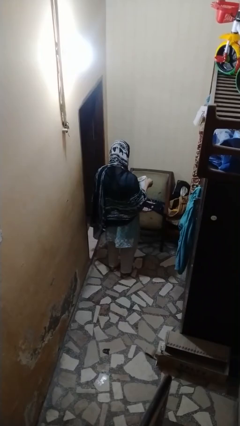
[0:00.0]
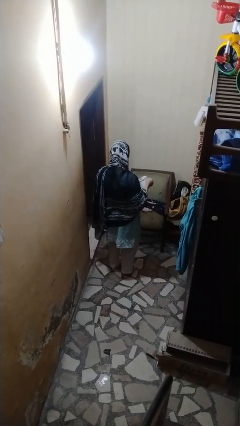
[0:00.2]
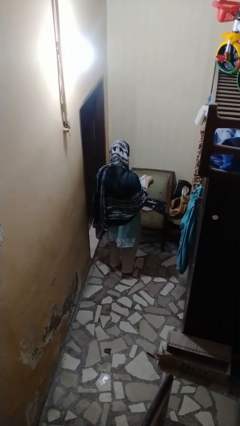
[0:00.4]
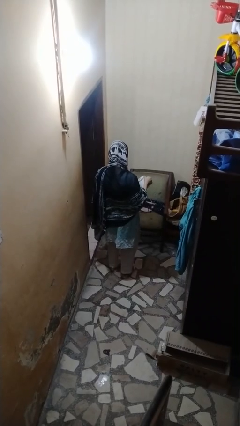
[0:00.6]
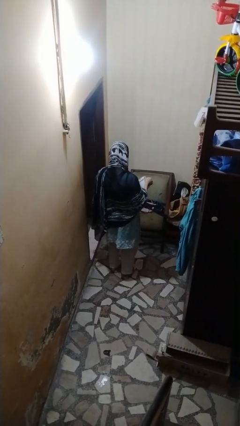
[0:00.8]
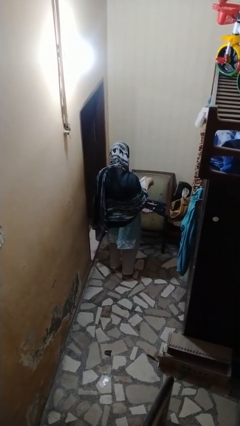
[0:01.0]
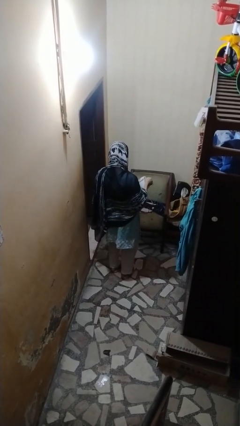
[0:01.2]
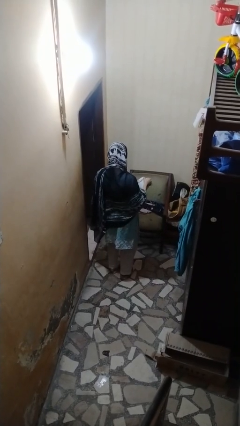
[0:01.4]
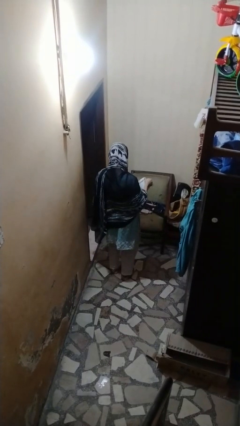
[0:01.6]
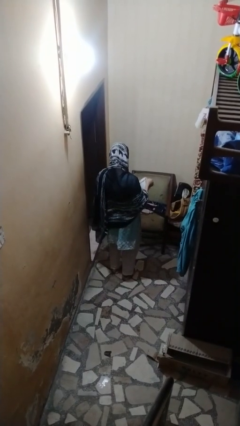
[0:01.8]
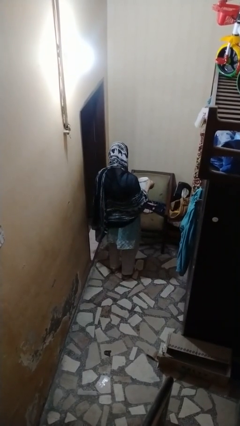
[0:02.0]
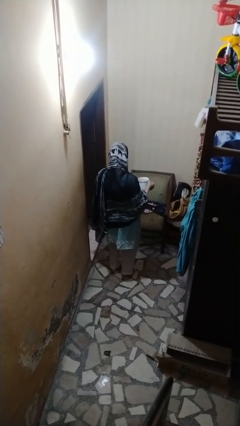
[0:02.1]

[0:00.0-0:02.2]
person pours coffee into mug

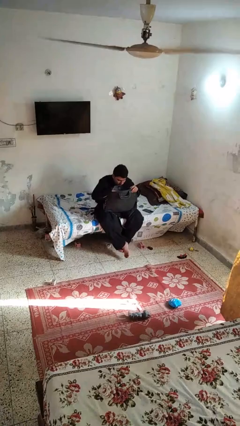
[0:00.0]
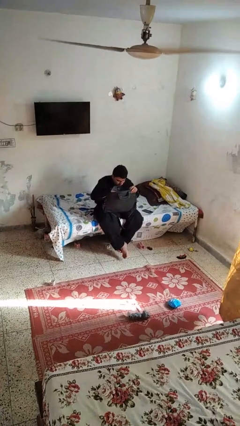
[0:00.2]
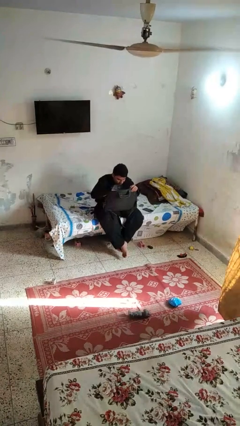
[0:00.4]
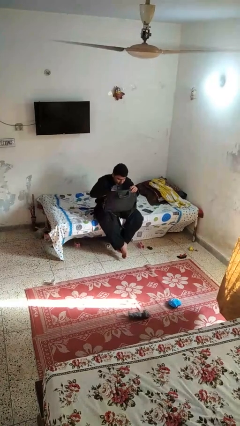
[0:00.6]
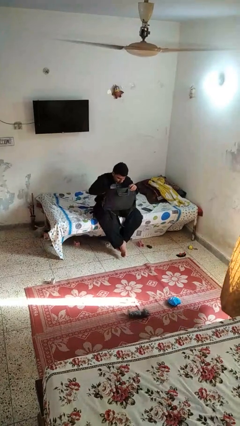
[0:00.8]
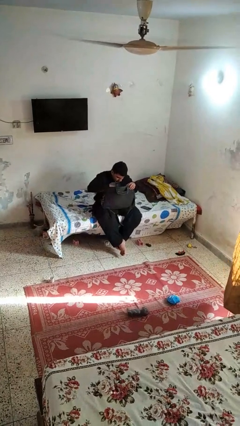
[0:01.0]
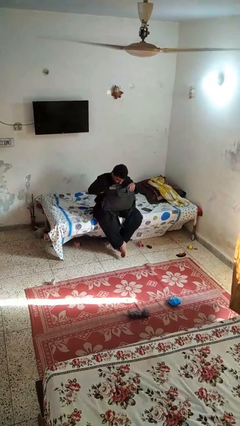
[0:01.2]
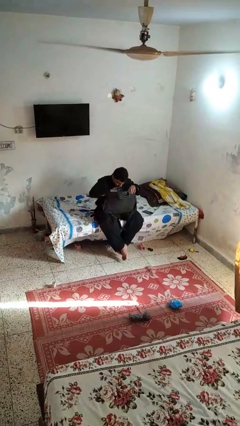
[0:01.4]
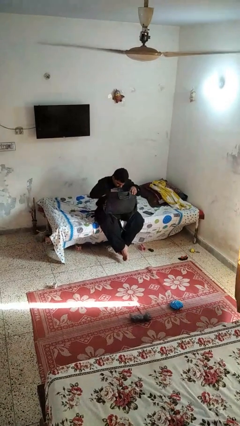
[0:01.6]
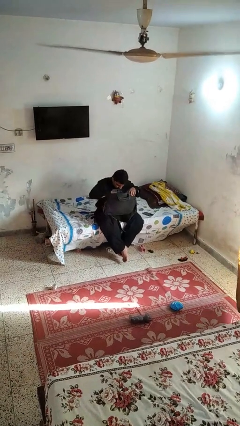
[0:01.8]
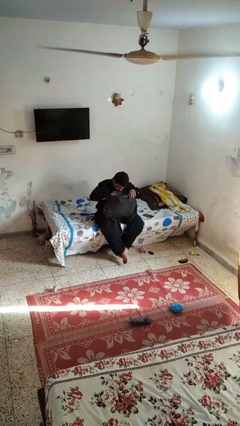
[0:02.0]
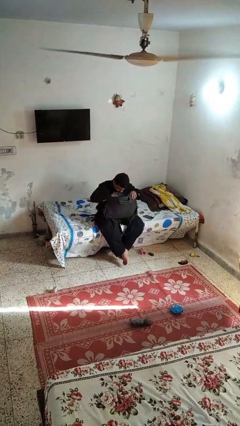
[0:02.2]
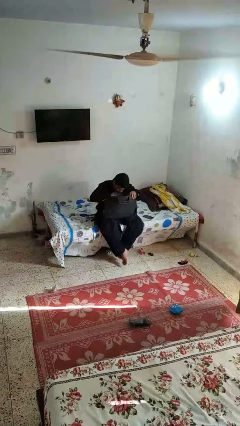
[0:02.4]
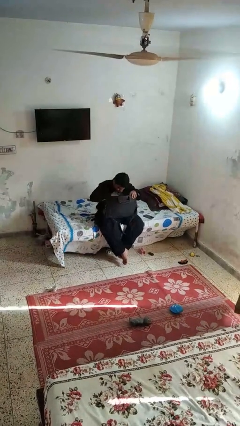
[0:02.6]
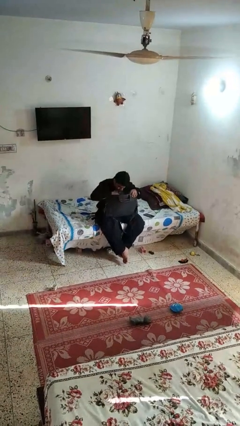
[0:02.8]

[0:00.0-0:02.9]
person searches in backpack

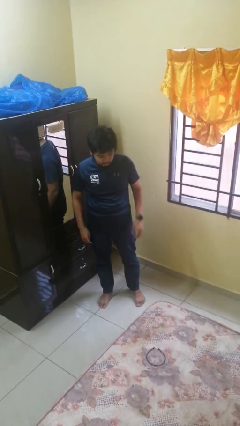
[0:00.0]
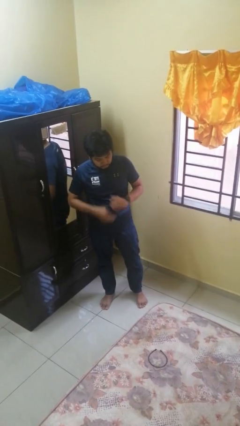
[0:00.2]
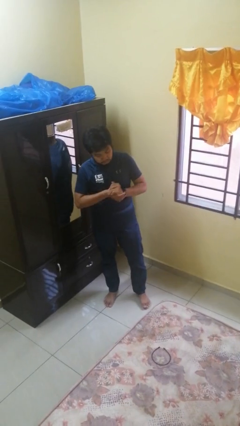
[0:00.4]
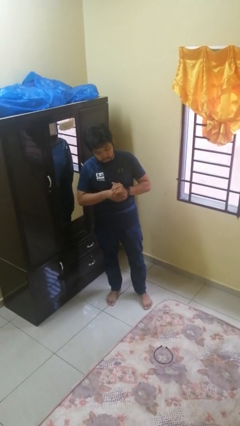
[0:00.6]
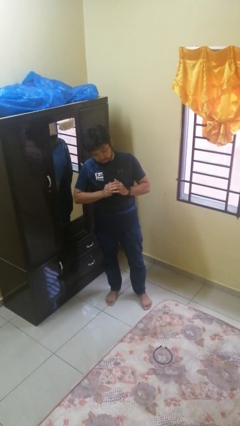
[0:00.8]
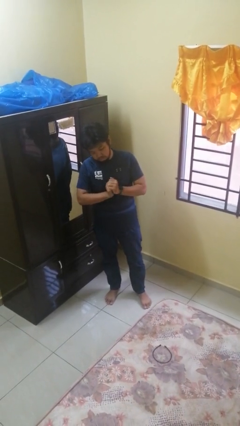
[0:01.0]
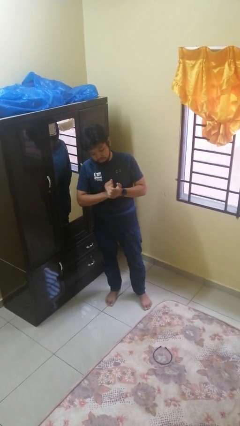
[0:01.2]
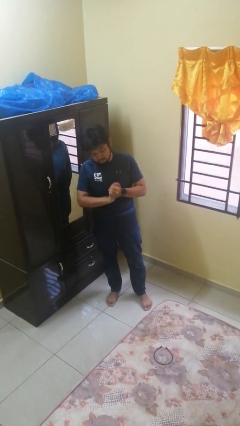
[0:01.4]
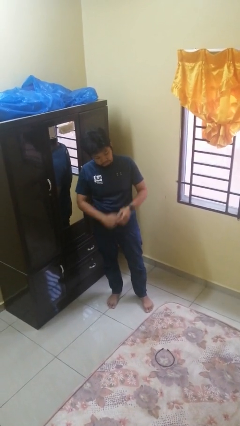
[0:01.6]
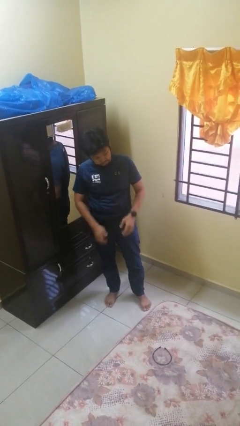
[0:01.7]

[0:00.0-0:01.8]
person cracks knuckles

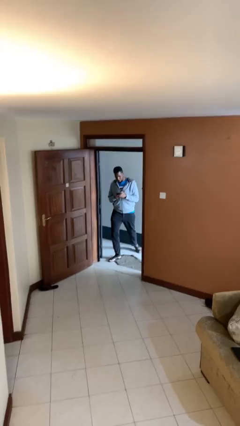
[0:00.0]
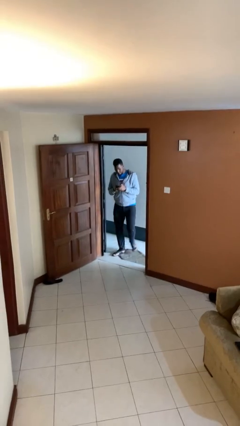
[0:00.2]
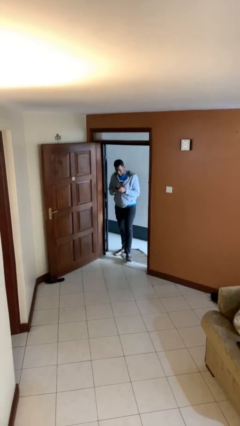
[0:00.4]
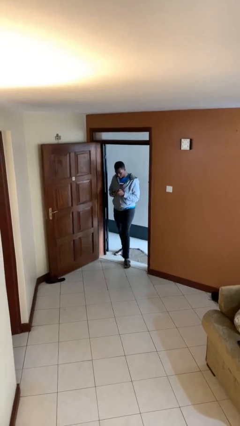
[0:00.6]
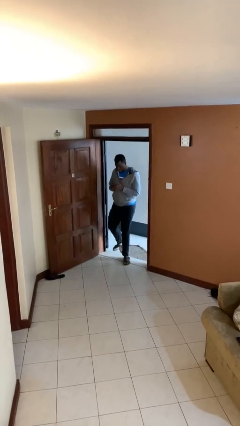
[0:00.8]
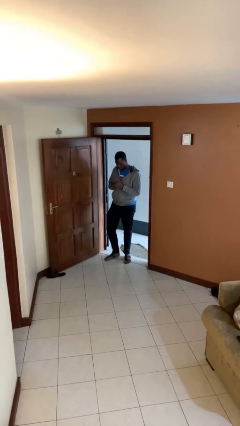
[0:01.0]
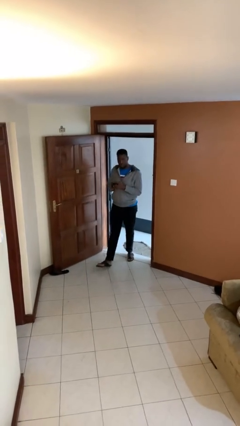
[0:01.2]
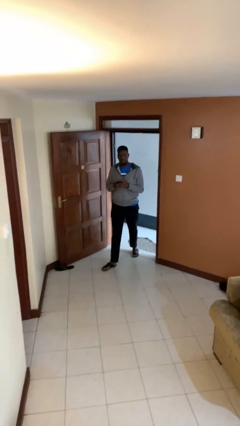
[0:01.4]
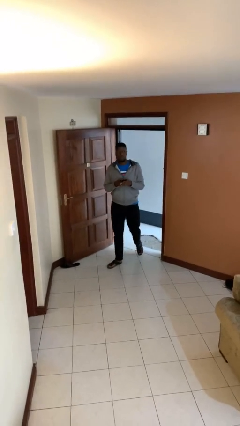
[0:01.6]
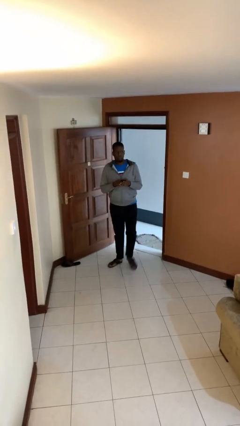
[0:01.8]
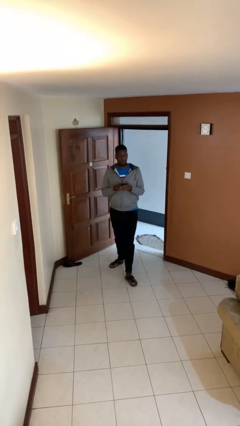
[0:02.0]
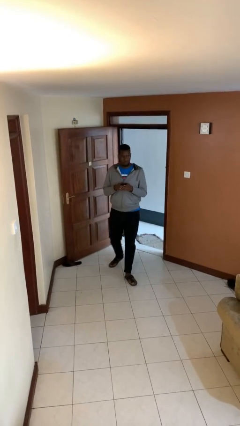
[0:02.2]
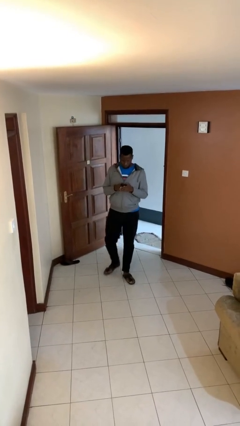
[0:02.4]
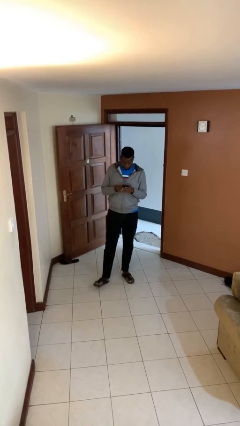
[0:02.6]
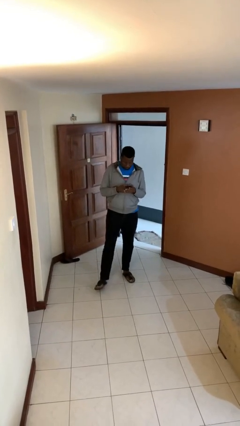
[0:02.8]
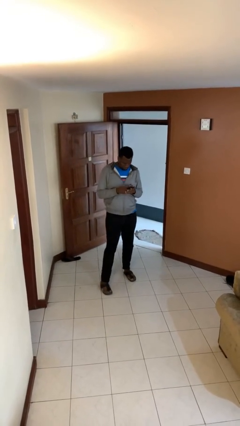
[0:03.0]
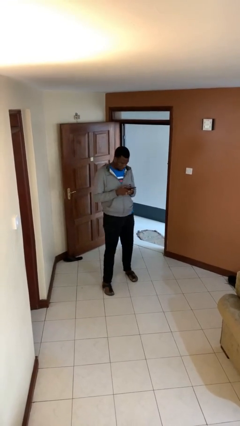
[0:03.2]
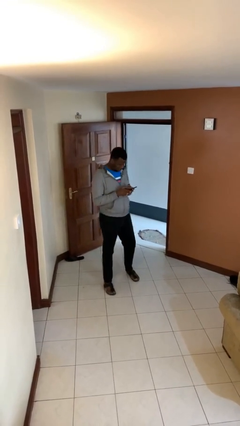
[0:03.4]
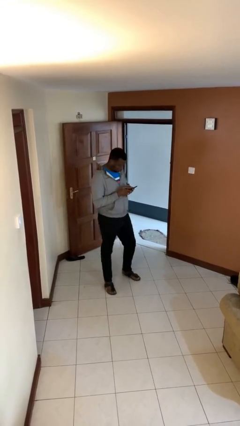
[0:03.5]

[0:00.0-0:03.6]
person enters scene through structure

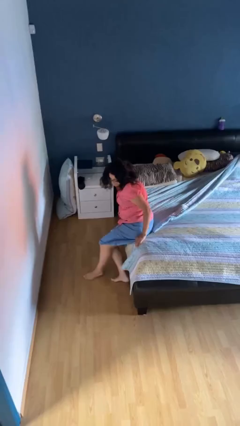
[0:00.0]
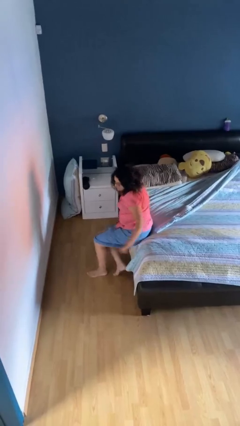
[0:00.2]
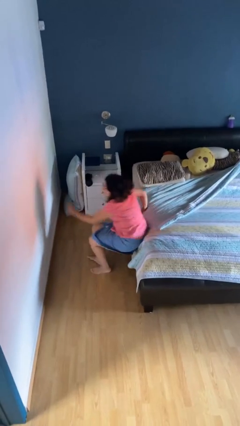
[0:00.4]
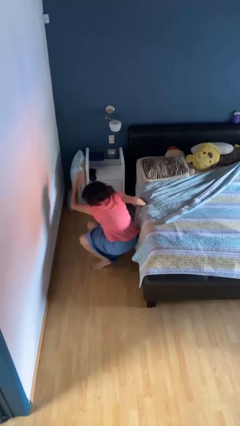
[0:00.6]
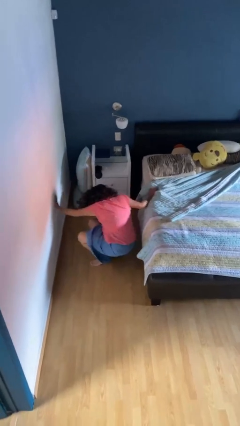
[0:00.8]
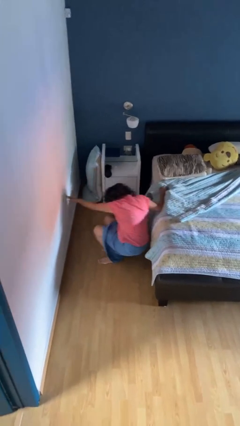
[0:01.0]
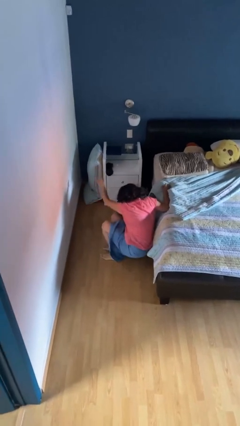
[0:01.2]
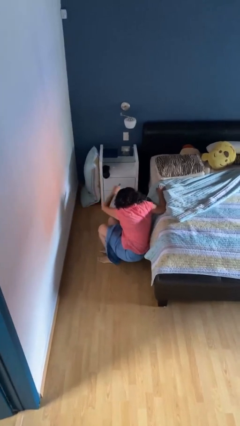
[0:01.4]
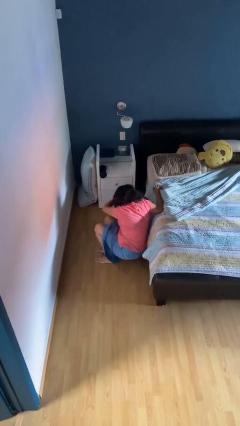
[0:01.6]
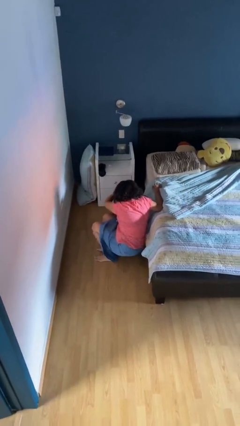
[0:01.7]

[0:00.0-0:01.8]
person falls from bed

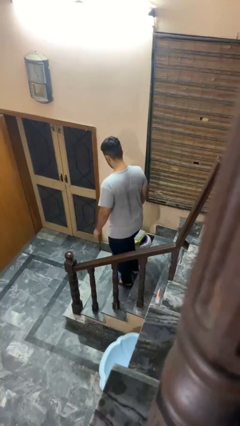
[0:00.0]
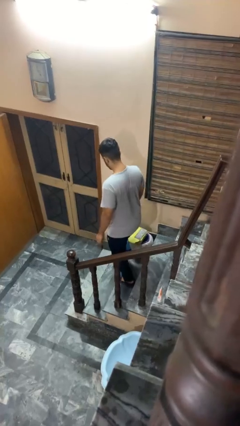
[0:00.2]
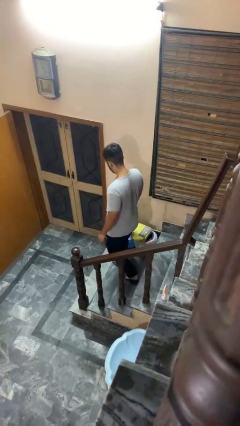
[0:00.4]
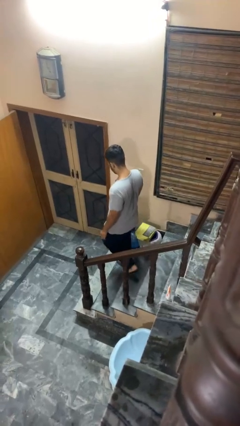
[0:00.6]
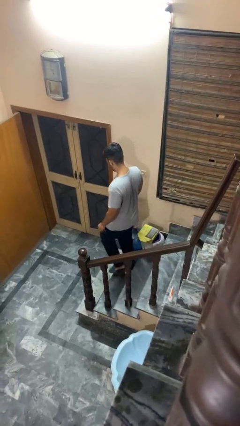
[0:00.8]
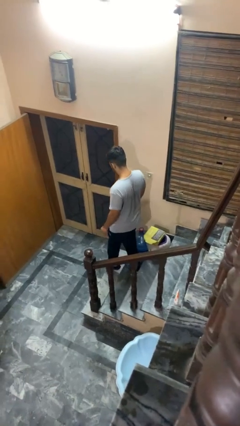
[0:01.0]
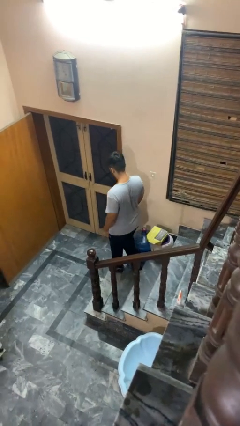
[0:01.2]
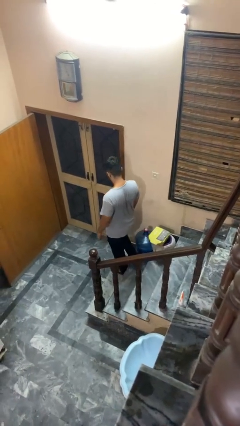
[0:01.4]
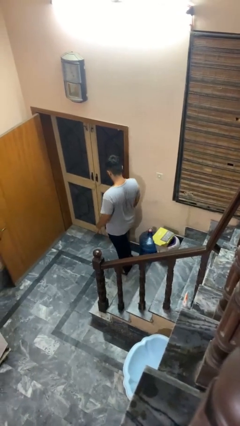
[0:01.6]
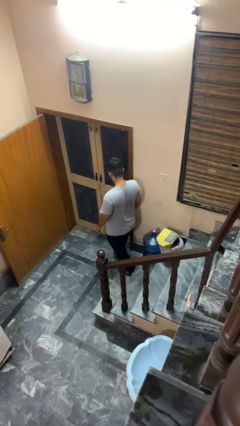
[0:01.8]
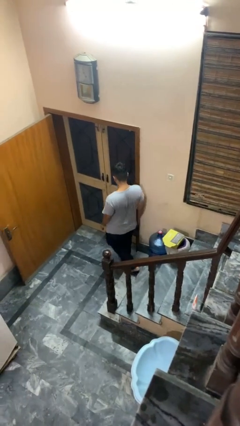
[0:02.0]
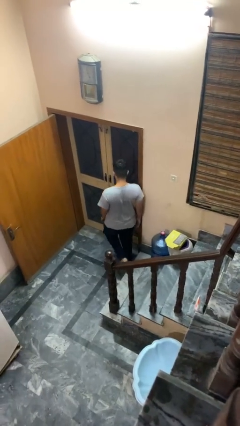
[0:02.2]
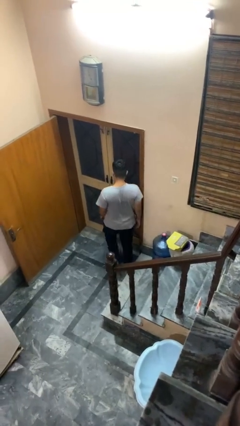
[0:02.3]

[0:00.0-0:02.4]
person climbs down stairs

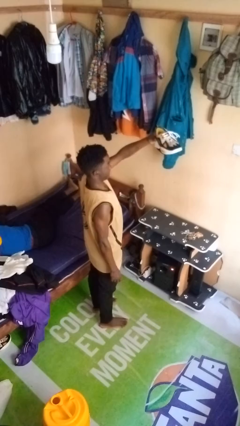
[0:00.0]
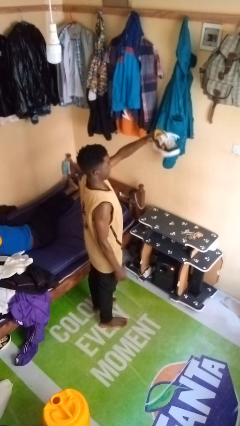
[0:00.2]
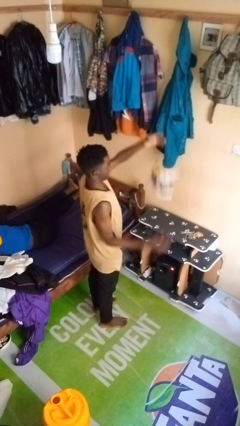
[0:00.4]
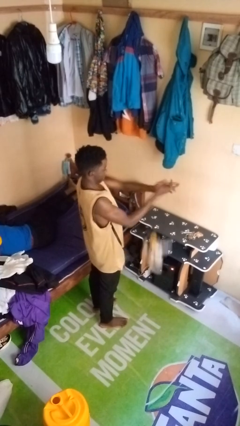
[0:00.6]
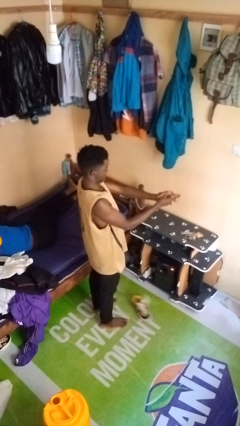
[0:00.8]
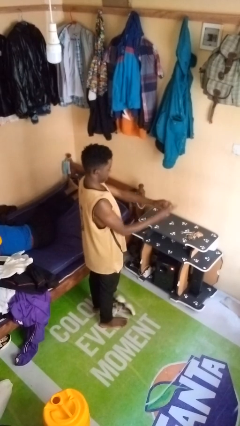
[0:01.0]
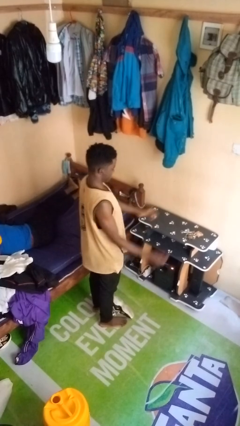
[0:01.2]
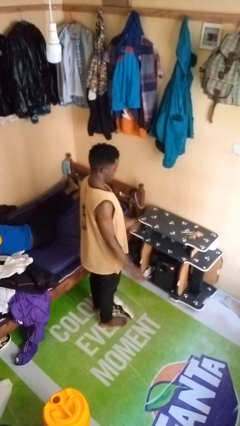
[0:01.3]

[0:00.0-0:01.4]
person drops object

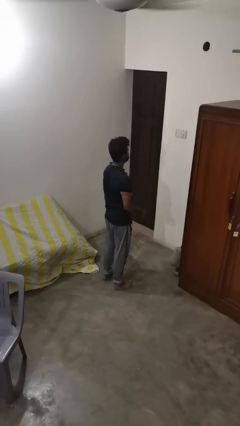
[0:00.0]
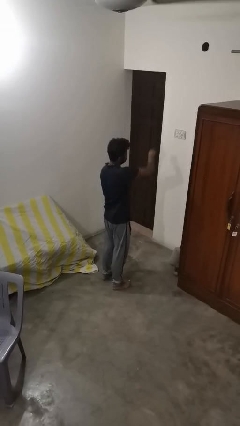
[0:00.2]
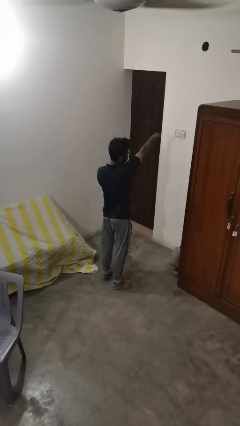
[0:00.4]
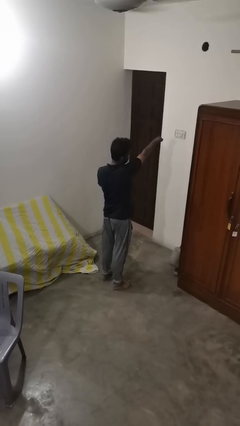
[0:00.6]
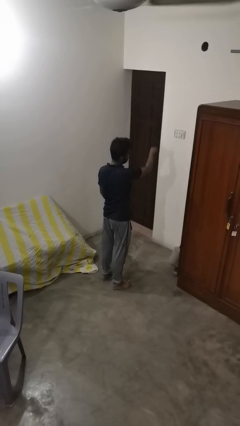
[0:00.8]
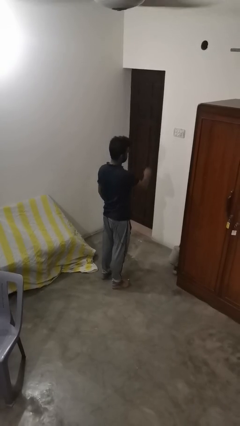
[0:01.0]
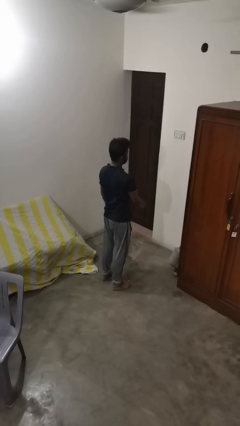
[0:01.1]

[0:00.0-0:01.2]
person punches
